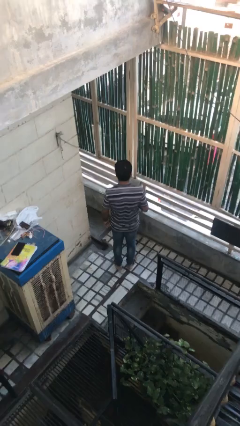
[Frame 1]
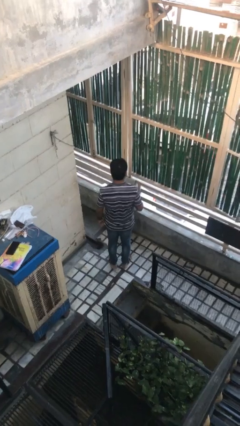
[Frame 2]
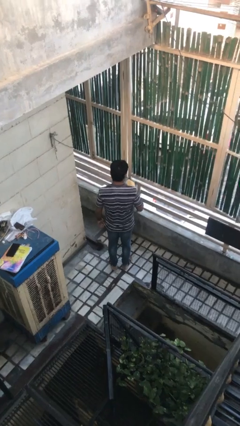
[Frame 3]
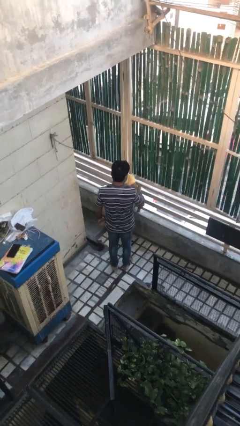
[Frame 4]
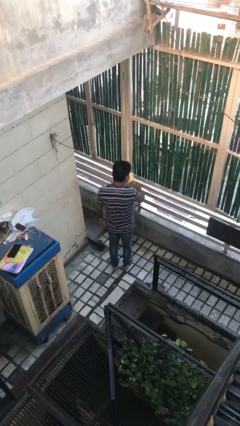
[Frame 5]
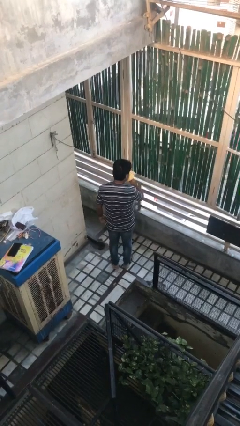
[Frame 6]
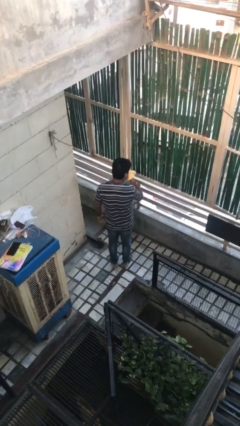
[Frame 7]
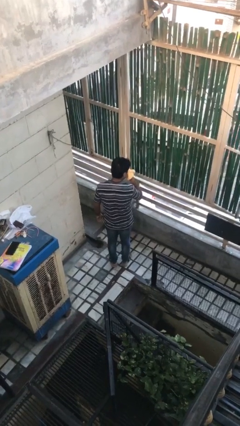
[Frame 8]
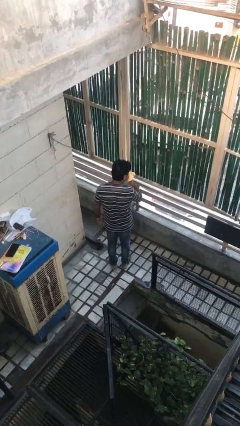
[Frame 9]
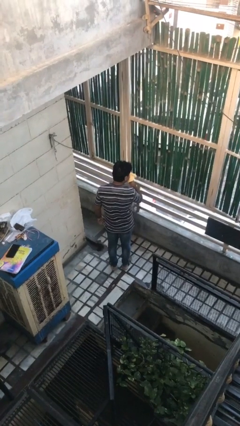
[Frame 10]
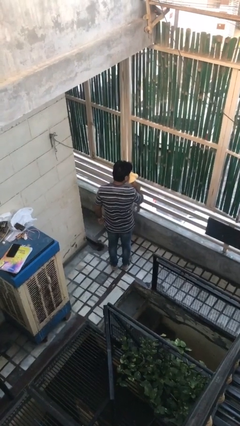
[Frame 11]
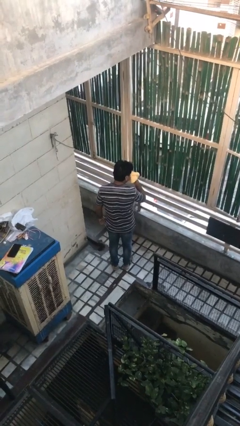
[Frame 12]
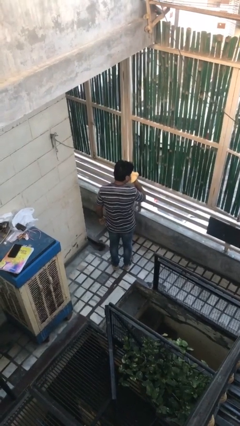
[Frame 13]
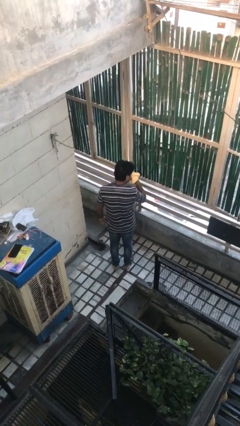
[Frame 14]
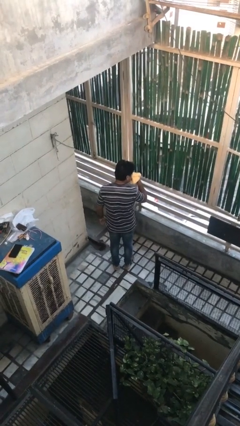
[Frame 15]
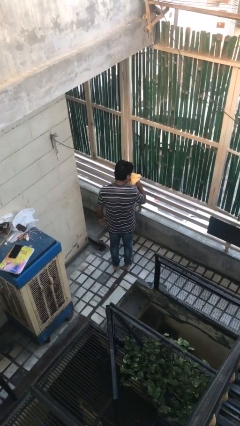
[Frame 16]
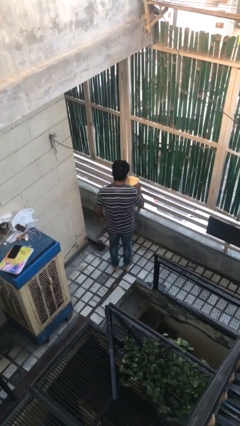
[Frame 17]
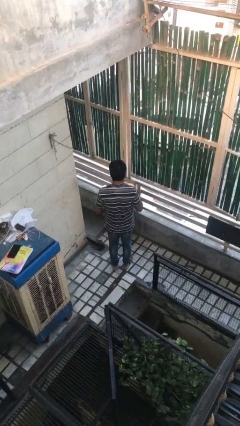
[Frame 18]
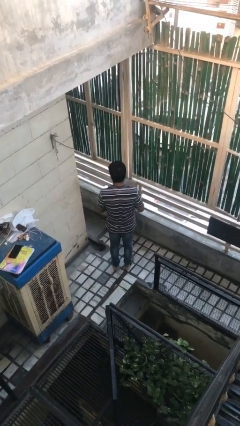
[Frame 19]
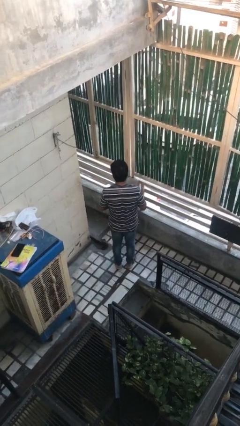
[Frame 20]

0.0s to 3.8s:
person blows nose

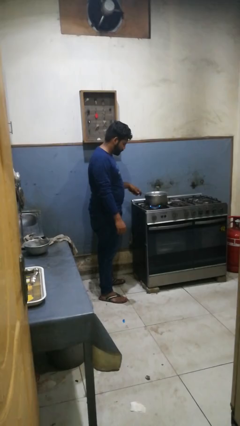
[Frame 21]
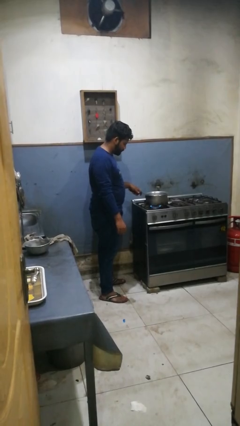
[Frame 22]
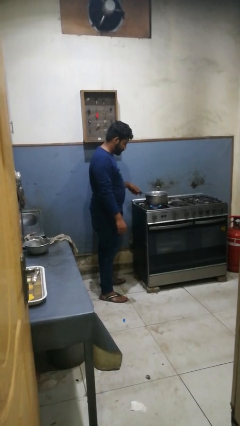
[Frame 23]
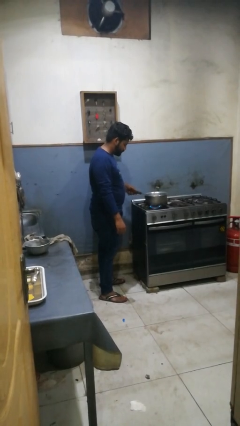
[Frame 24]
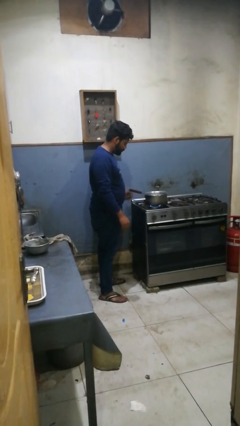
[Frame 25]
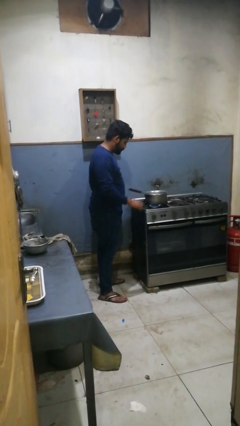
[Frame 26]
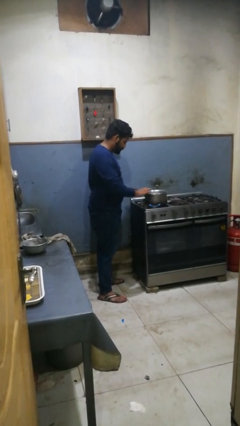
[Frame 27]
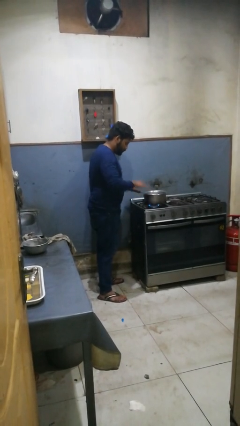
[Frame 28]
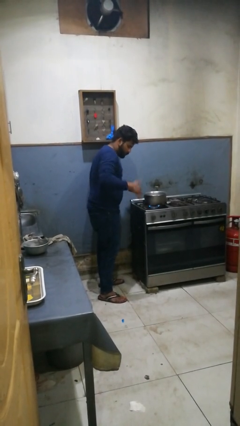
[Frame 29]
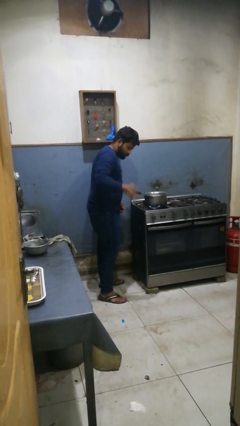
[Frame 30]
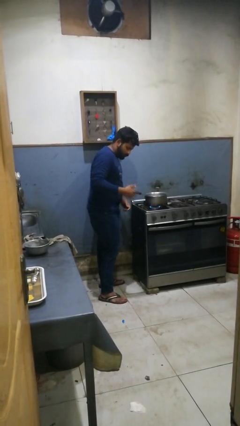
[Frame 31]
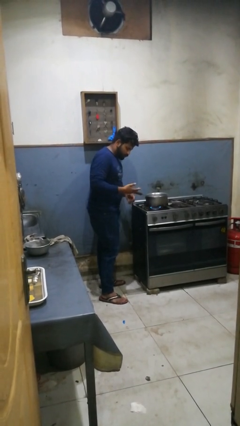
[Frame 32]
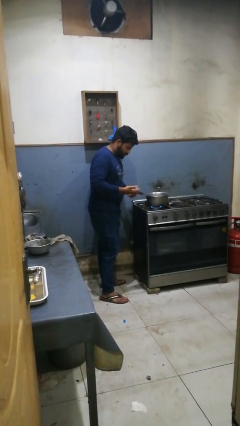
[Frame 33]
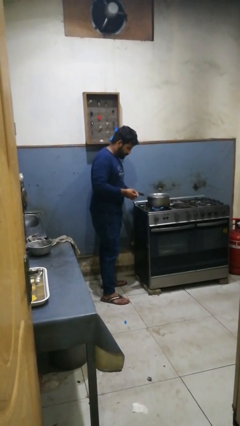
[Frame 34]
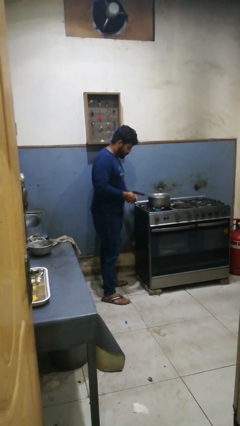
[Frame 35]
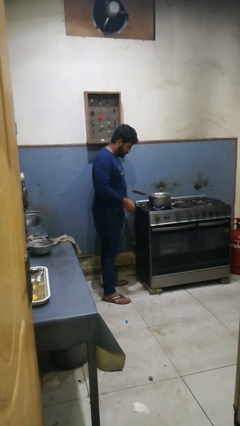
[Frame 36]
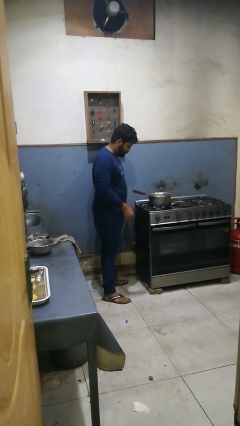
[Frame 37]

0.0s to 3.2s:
person burns hand

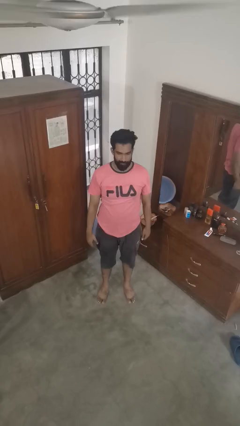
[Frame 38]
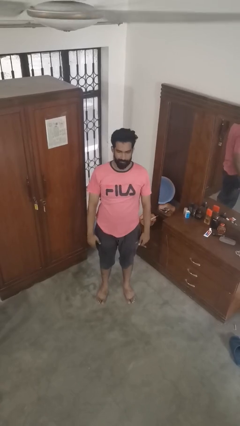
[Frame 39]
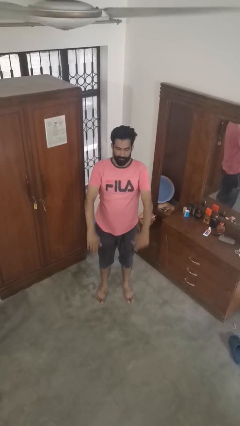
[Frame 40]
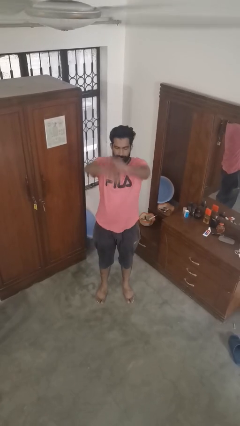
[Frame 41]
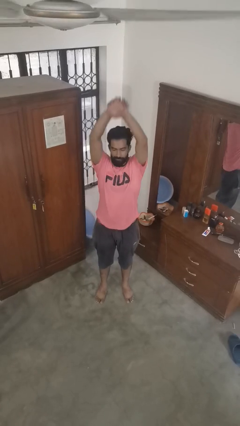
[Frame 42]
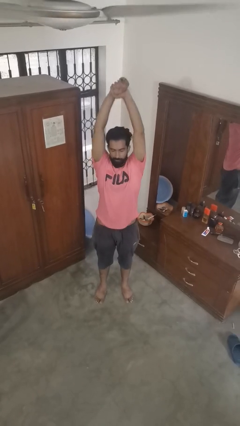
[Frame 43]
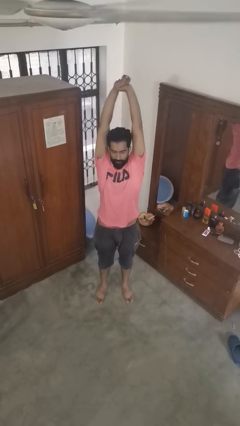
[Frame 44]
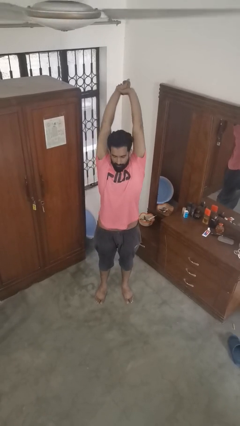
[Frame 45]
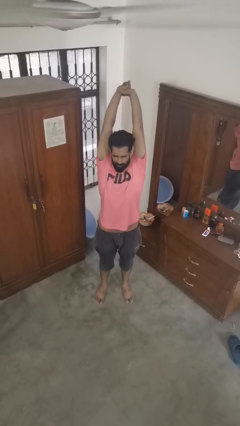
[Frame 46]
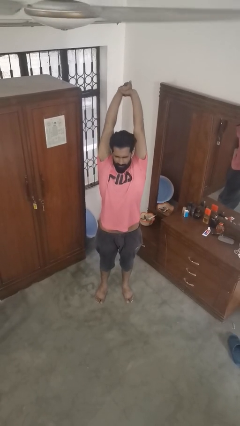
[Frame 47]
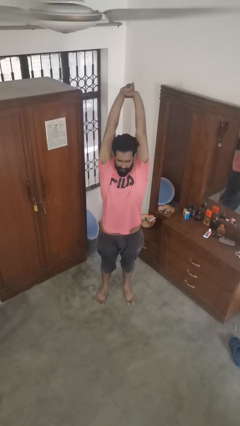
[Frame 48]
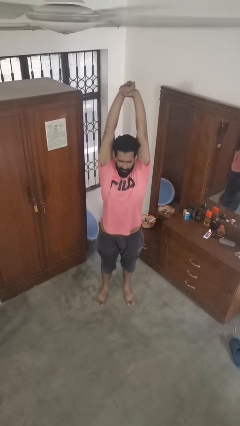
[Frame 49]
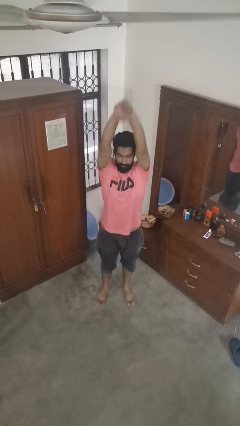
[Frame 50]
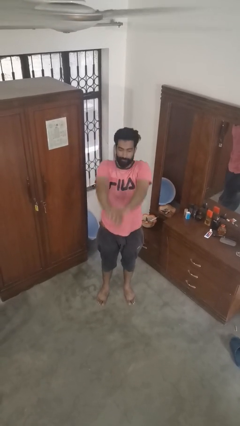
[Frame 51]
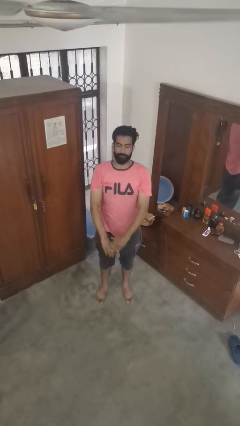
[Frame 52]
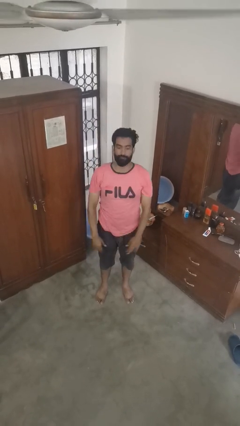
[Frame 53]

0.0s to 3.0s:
person stretches arms over head

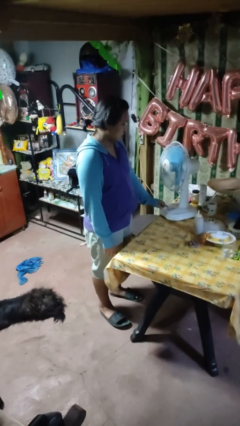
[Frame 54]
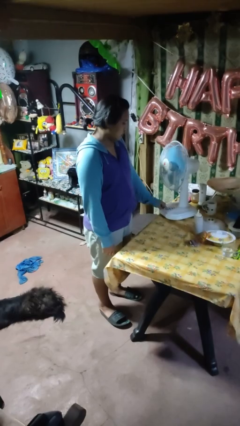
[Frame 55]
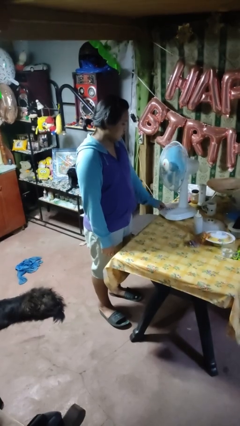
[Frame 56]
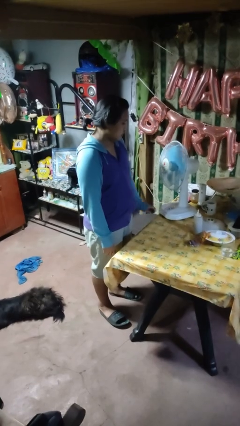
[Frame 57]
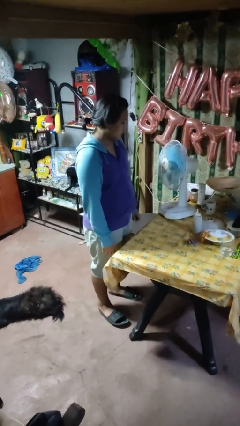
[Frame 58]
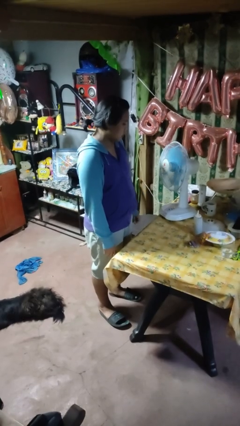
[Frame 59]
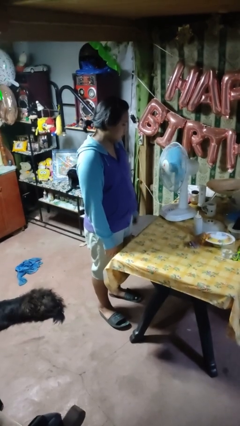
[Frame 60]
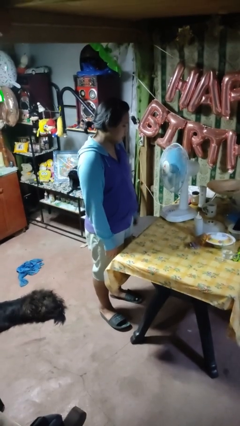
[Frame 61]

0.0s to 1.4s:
person turns on fan

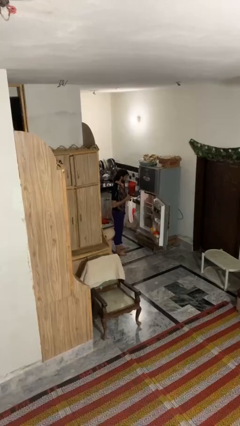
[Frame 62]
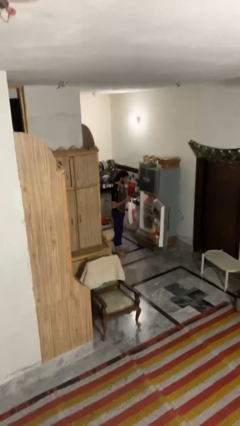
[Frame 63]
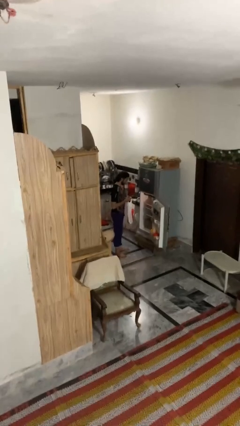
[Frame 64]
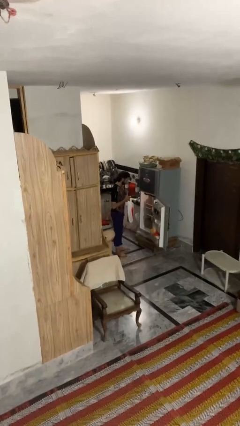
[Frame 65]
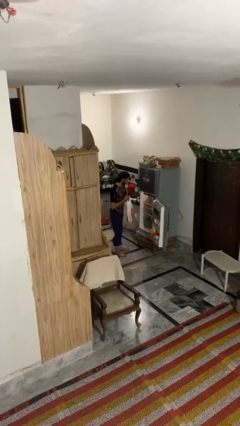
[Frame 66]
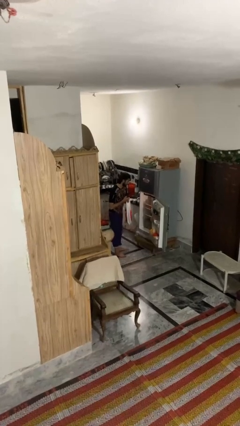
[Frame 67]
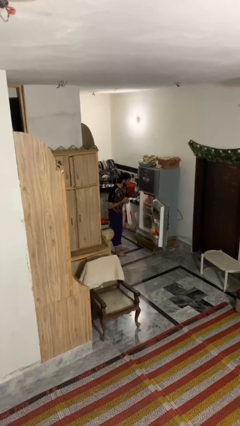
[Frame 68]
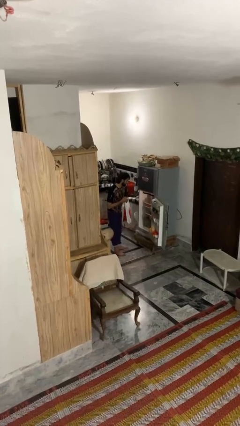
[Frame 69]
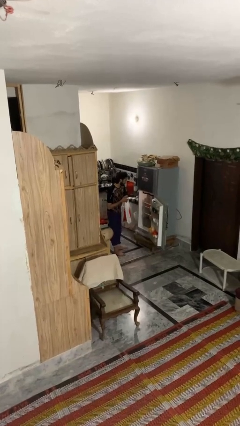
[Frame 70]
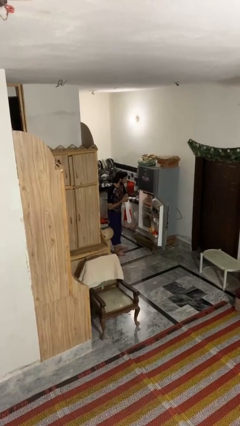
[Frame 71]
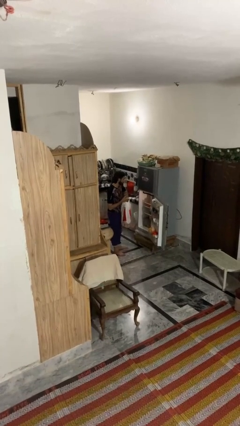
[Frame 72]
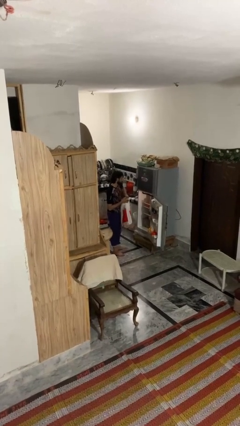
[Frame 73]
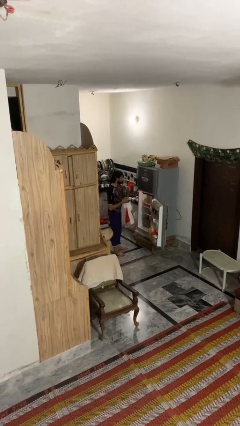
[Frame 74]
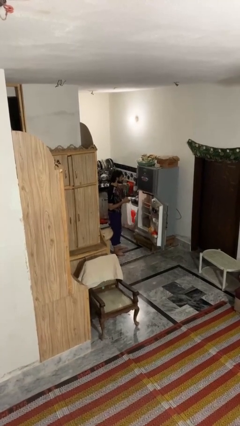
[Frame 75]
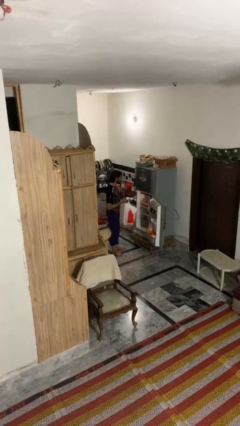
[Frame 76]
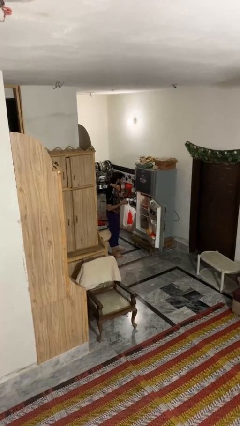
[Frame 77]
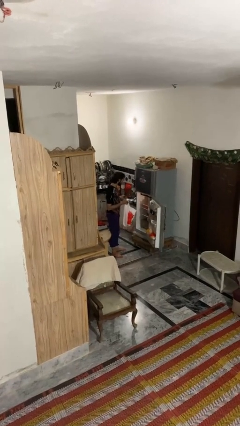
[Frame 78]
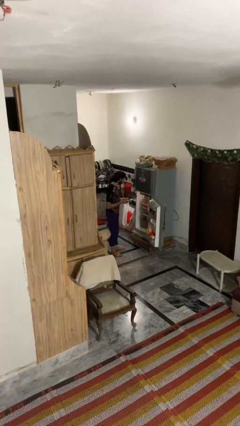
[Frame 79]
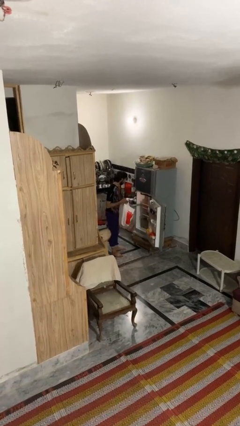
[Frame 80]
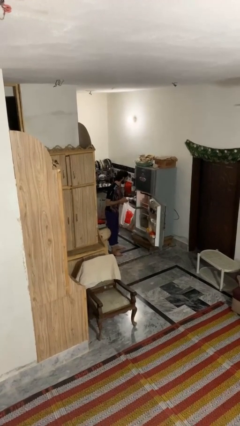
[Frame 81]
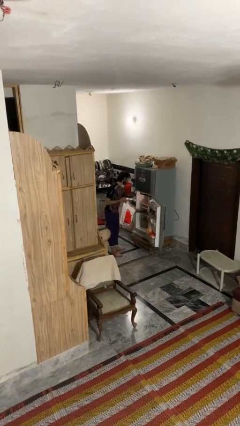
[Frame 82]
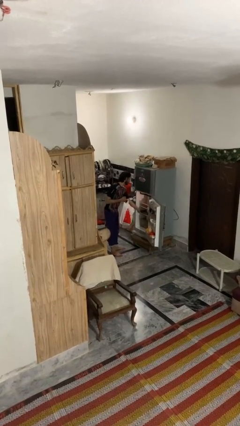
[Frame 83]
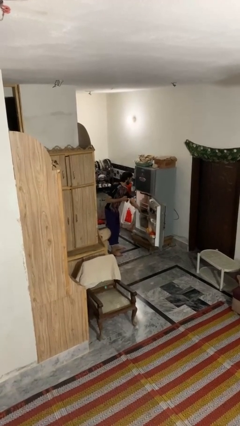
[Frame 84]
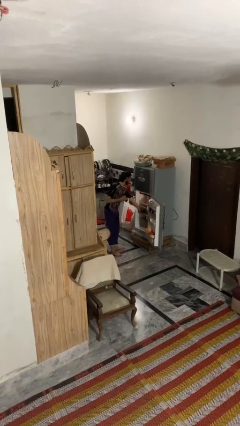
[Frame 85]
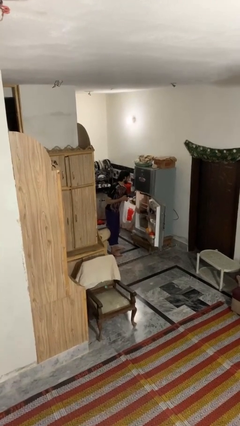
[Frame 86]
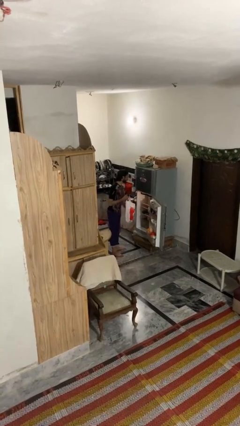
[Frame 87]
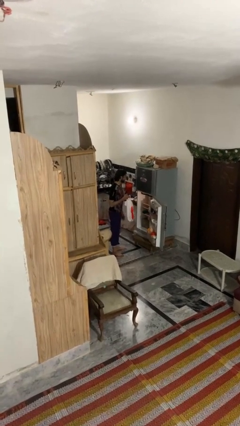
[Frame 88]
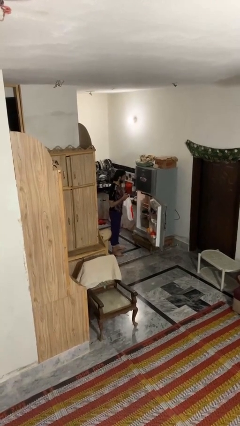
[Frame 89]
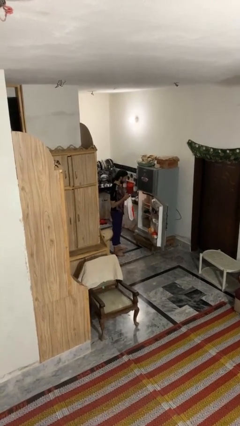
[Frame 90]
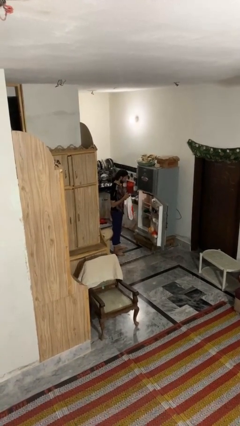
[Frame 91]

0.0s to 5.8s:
person loads groceries into refrigerator

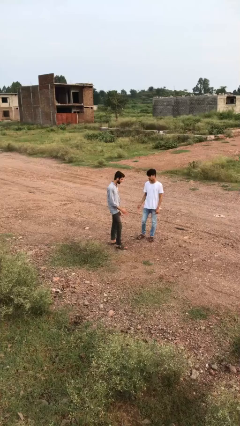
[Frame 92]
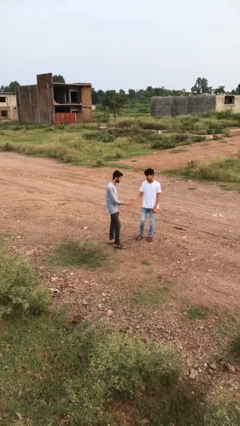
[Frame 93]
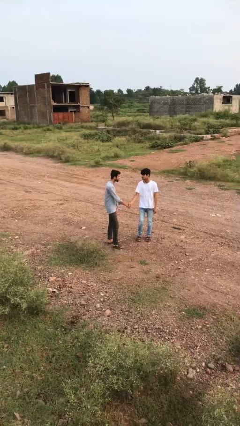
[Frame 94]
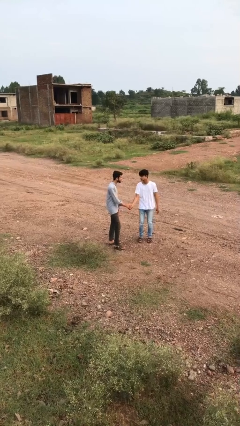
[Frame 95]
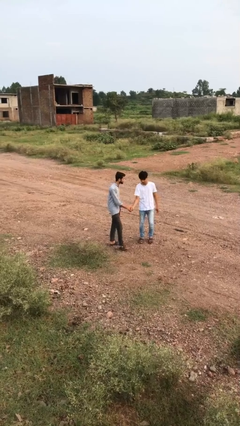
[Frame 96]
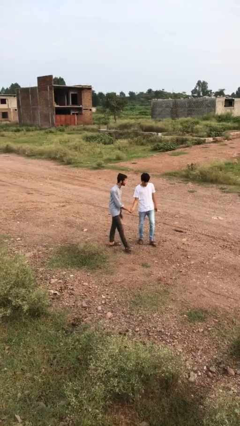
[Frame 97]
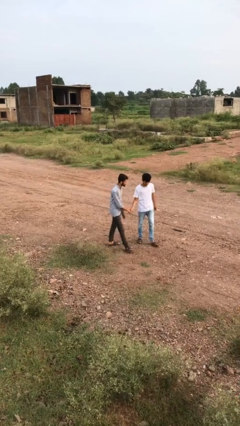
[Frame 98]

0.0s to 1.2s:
person shakes hand
